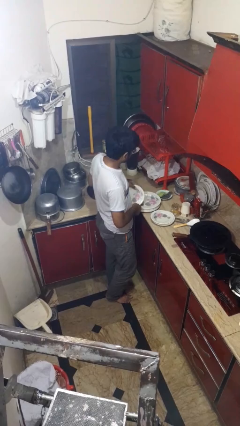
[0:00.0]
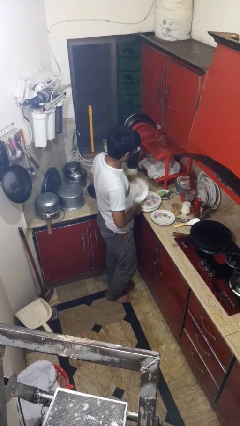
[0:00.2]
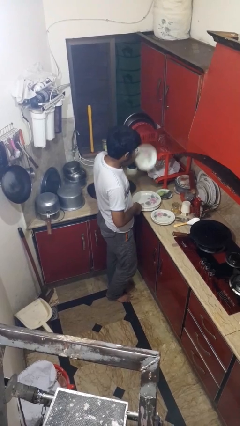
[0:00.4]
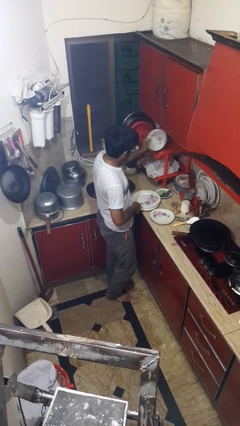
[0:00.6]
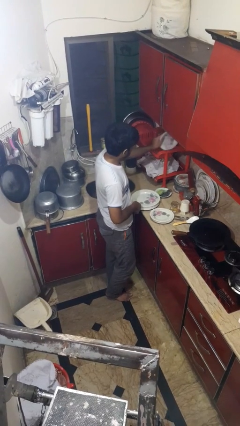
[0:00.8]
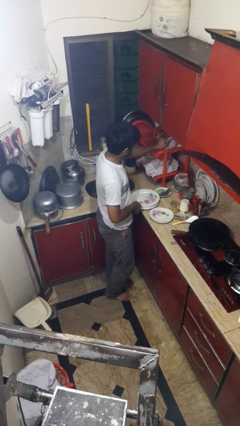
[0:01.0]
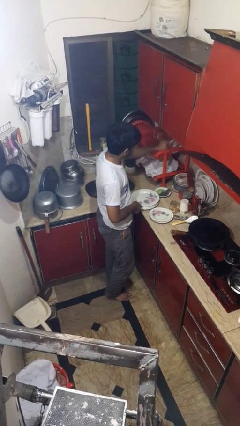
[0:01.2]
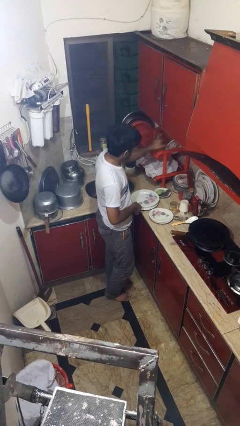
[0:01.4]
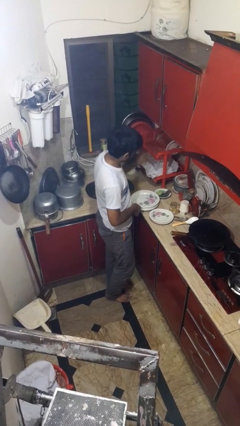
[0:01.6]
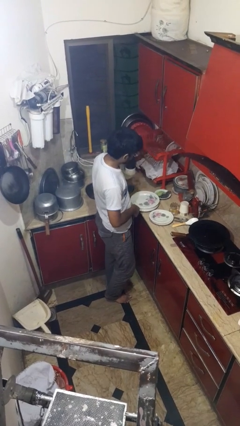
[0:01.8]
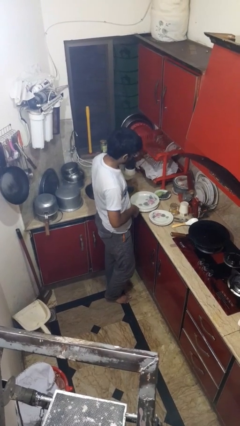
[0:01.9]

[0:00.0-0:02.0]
person loads dishwasher

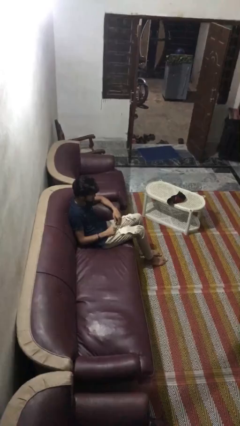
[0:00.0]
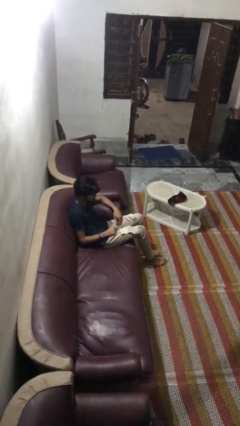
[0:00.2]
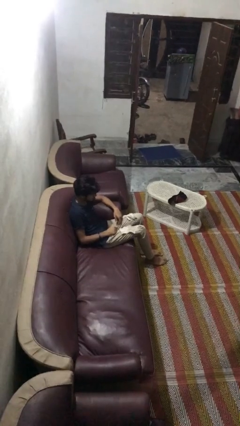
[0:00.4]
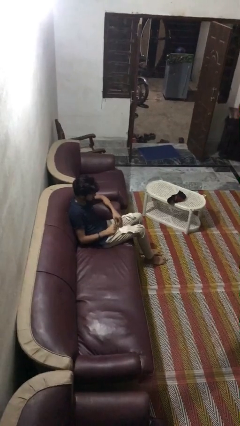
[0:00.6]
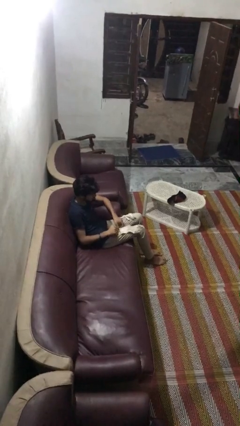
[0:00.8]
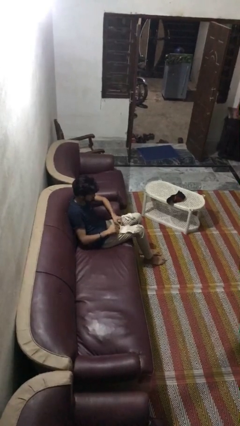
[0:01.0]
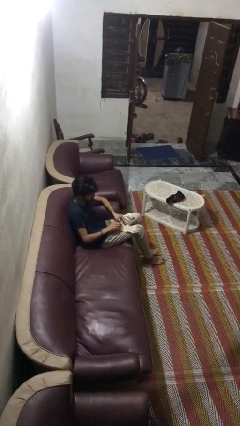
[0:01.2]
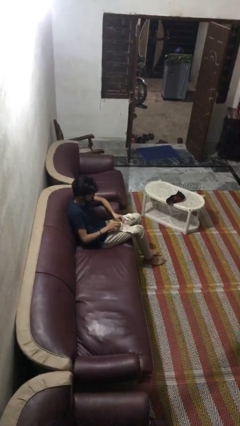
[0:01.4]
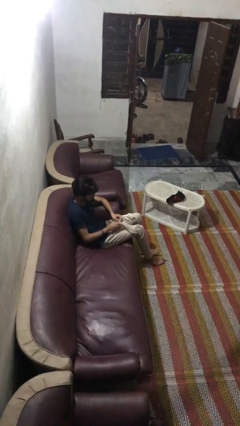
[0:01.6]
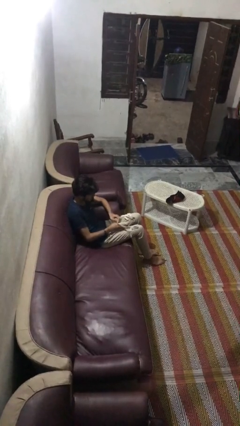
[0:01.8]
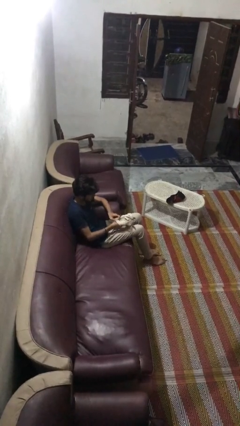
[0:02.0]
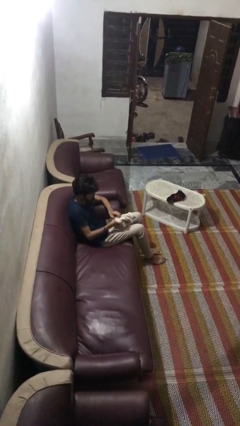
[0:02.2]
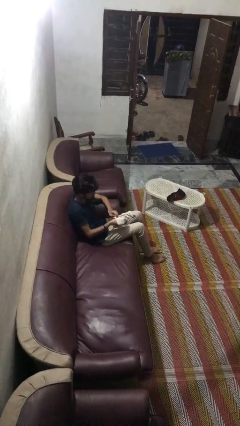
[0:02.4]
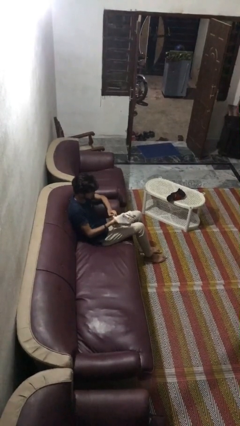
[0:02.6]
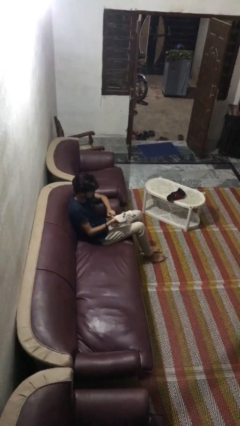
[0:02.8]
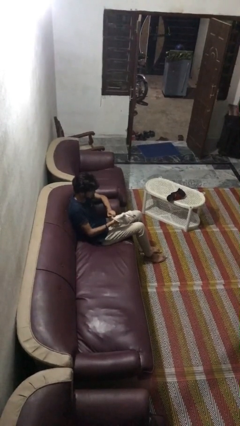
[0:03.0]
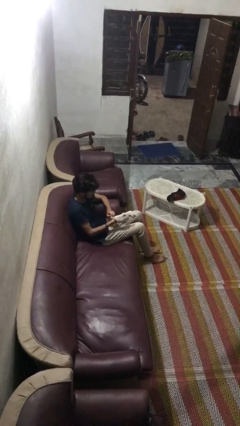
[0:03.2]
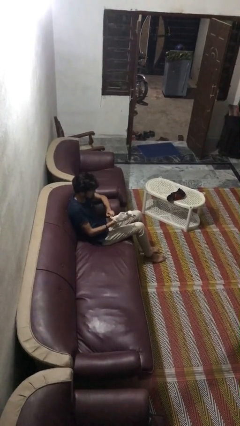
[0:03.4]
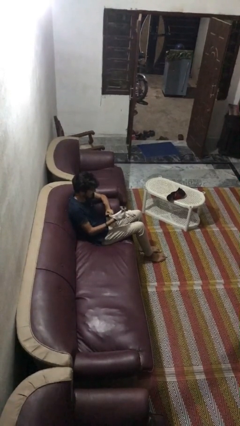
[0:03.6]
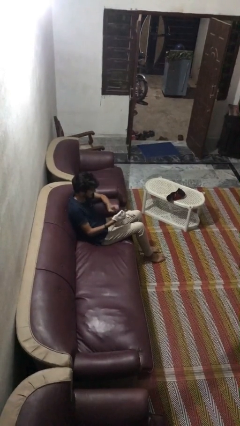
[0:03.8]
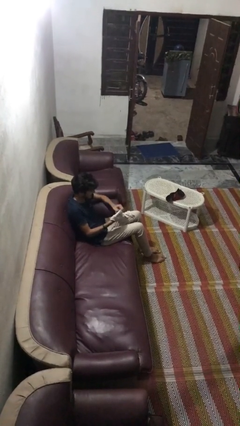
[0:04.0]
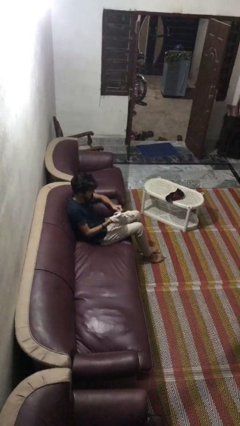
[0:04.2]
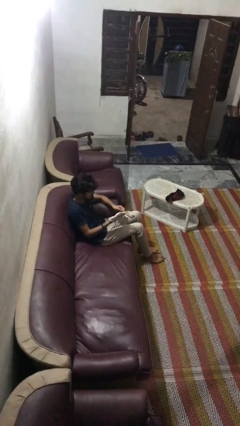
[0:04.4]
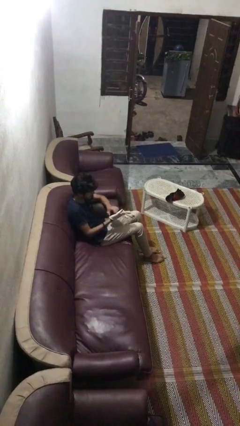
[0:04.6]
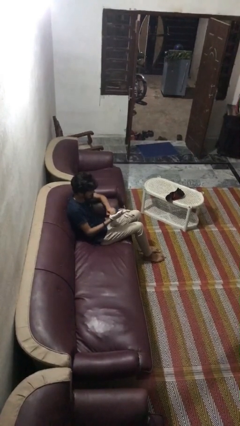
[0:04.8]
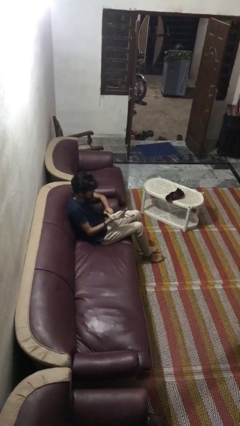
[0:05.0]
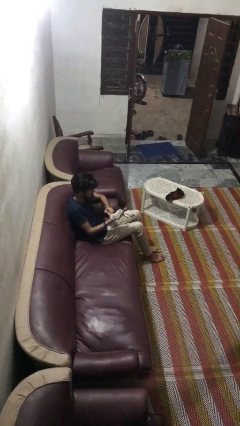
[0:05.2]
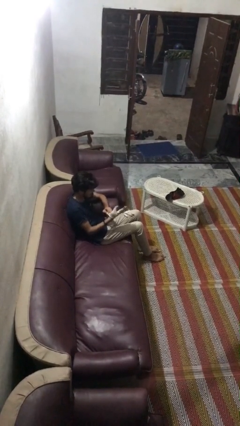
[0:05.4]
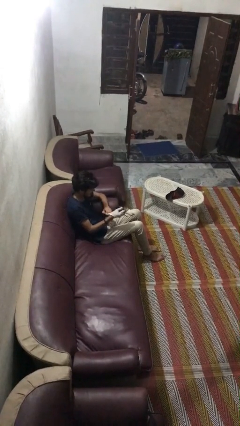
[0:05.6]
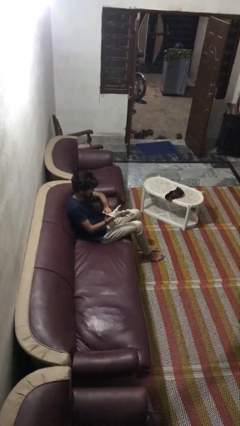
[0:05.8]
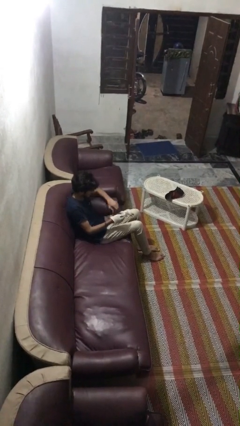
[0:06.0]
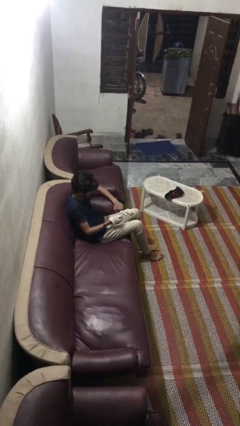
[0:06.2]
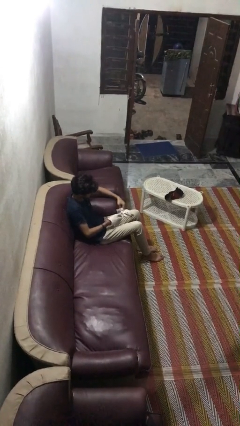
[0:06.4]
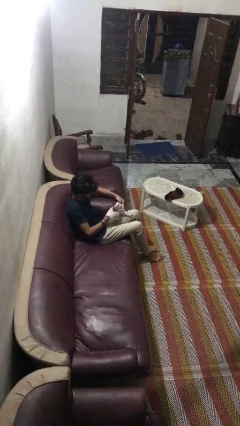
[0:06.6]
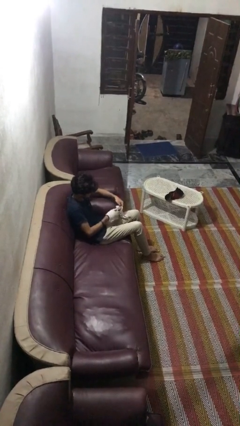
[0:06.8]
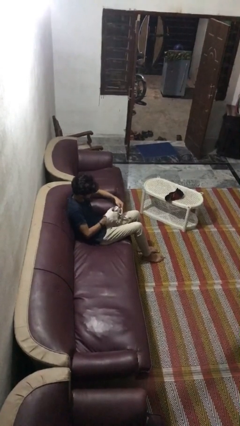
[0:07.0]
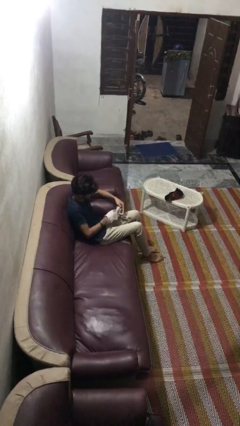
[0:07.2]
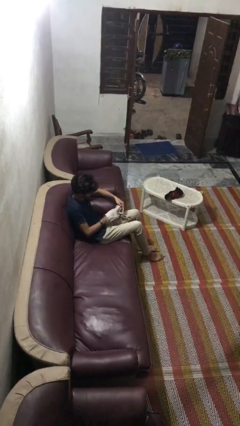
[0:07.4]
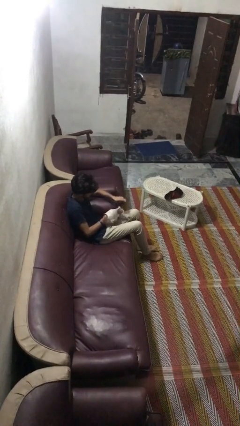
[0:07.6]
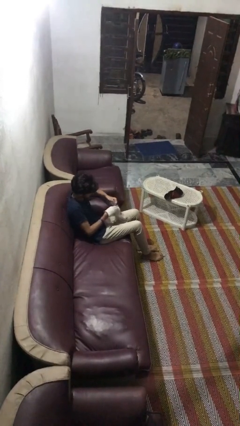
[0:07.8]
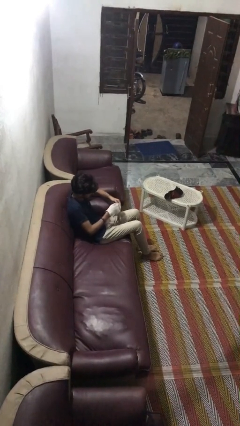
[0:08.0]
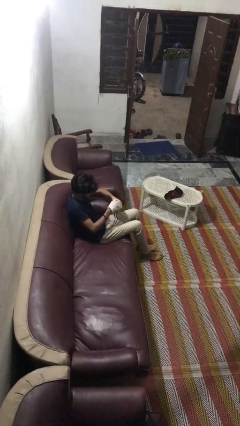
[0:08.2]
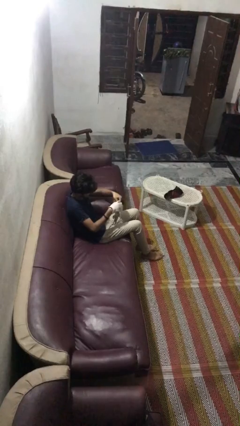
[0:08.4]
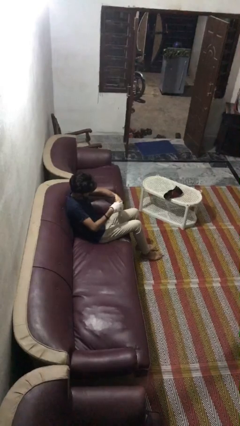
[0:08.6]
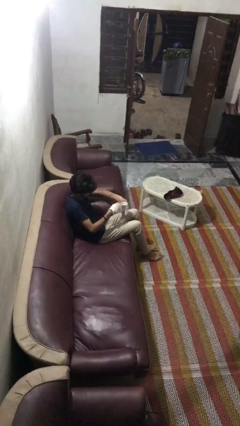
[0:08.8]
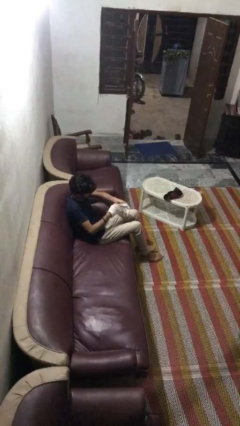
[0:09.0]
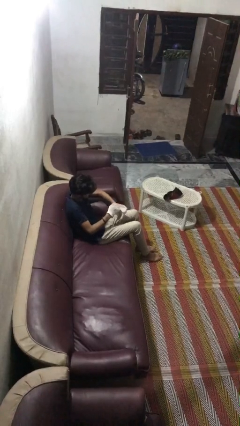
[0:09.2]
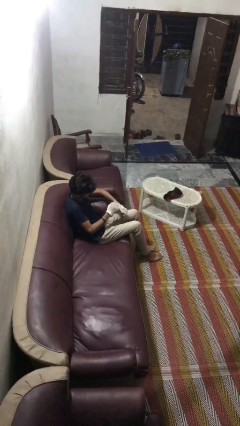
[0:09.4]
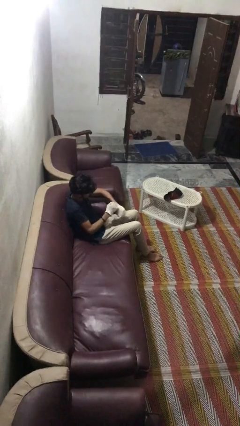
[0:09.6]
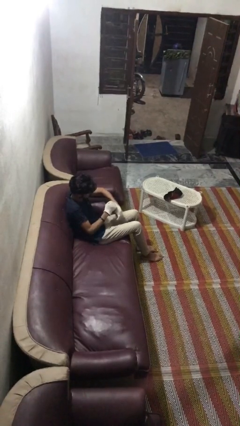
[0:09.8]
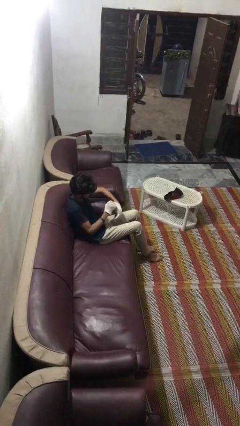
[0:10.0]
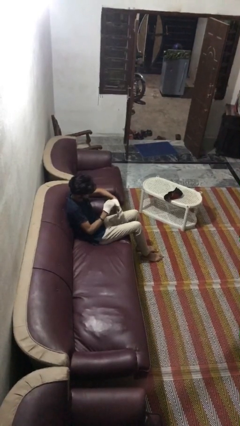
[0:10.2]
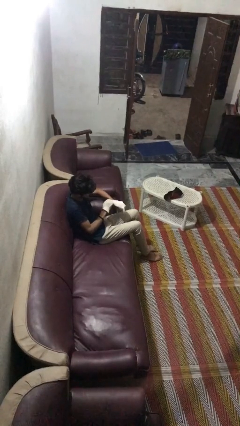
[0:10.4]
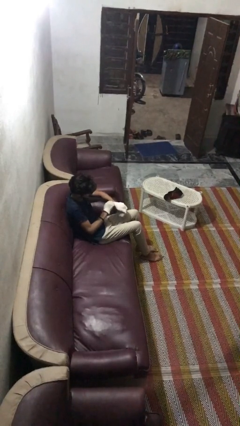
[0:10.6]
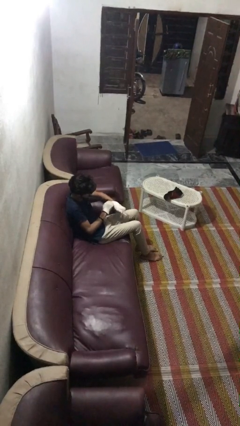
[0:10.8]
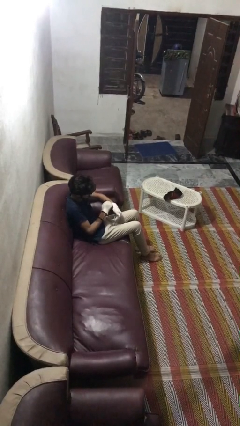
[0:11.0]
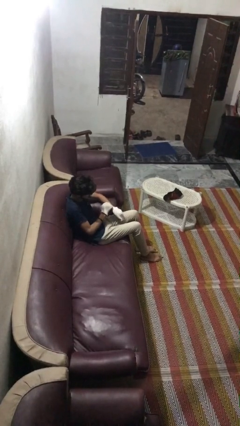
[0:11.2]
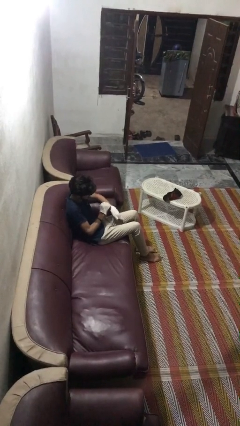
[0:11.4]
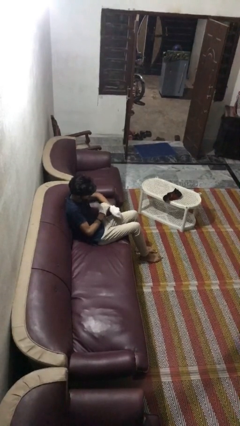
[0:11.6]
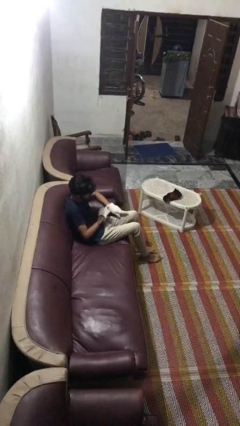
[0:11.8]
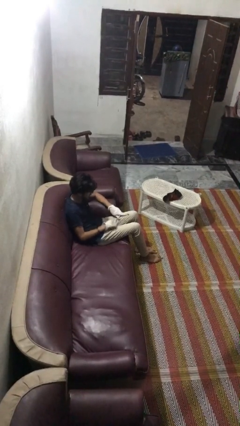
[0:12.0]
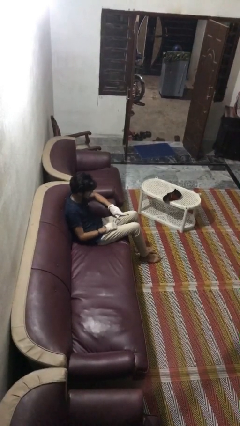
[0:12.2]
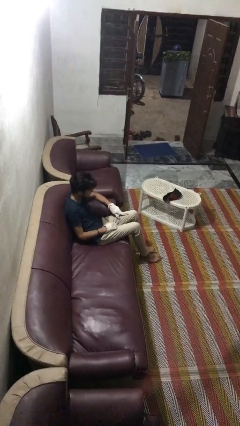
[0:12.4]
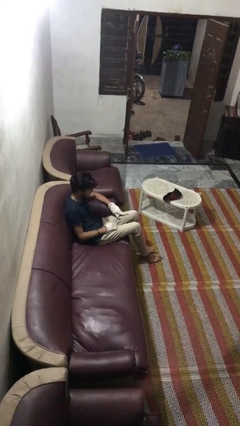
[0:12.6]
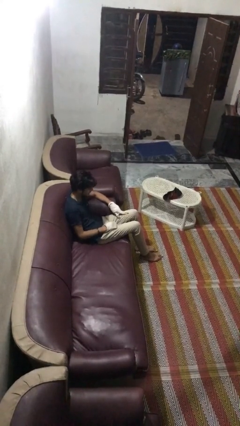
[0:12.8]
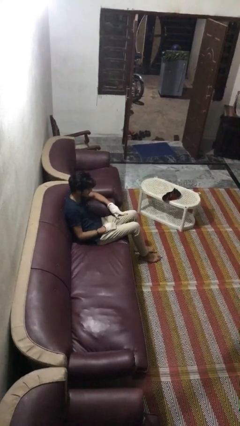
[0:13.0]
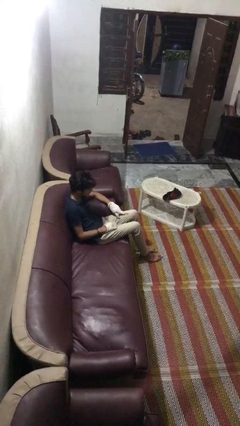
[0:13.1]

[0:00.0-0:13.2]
person puts on gloves

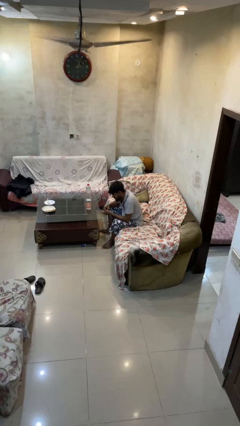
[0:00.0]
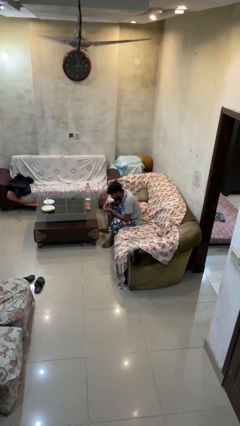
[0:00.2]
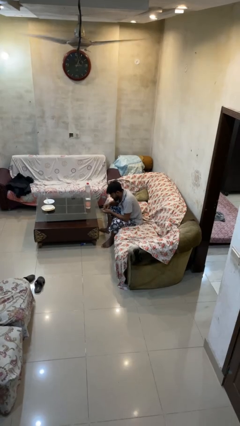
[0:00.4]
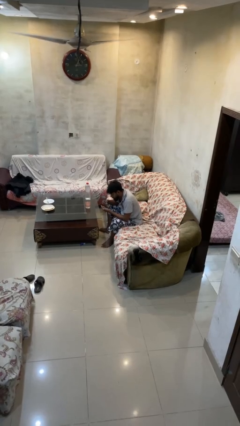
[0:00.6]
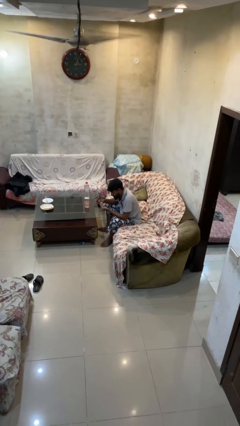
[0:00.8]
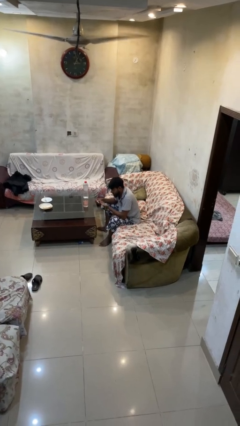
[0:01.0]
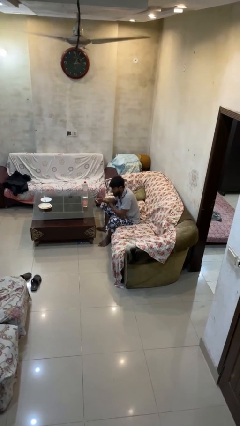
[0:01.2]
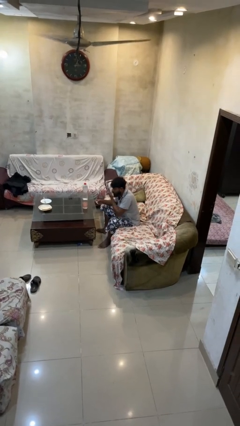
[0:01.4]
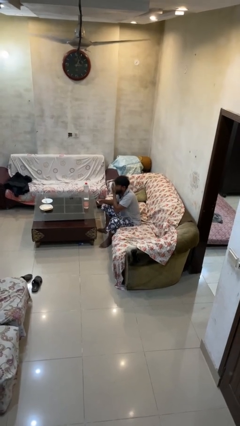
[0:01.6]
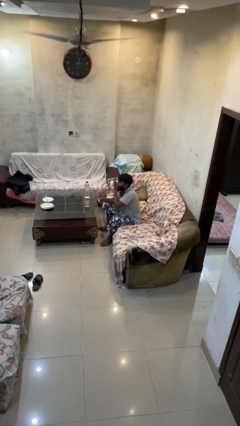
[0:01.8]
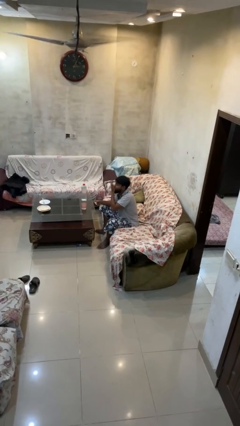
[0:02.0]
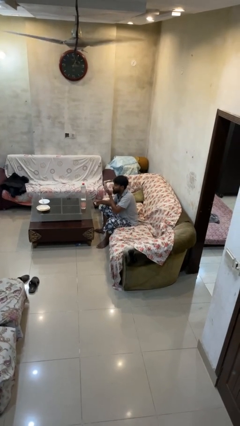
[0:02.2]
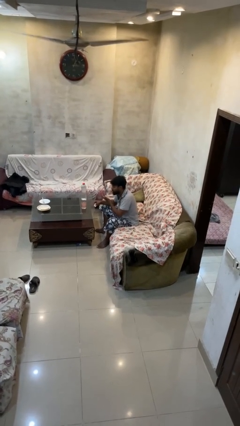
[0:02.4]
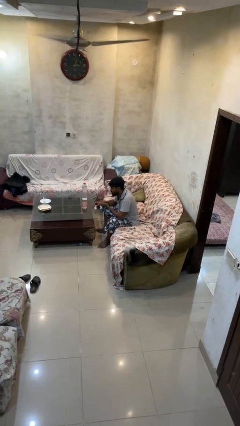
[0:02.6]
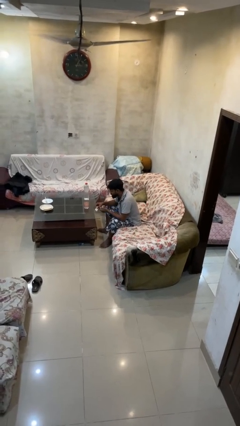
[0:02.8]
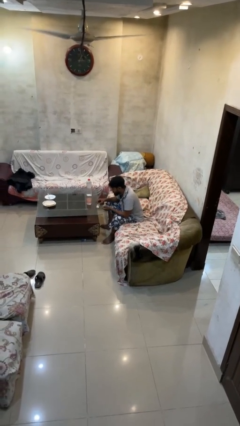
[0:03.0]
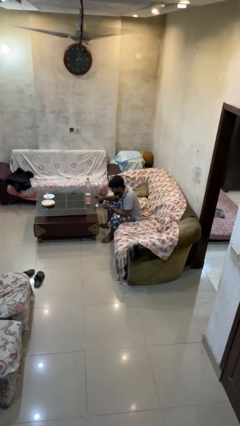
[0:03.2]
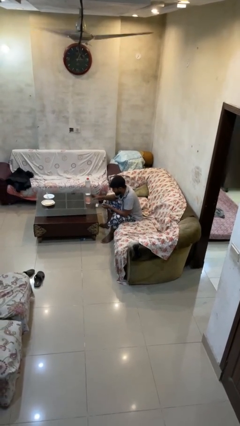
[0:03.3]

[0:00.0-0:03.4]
person takes medicine pills
